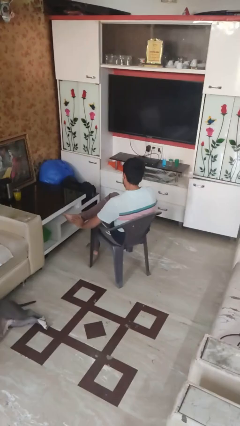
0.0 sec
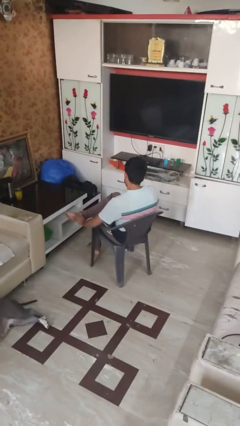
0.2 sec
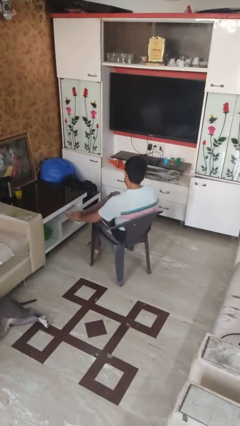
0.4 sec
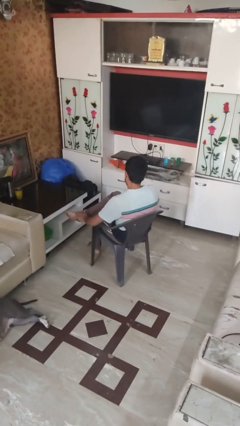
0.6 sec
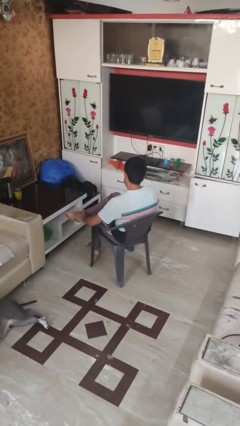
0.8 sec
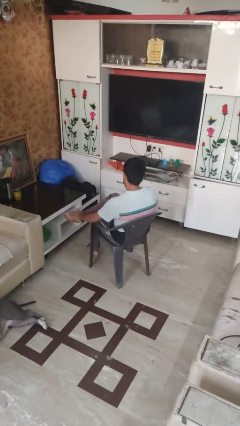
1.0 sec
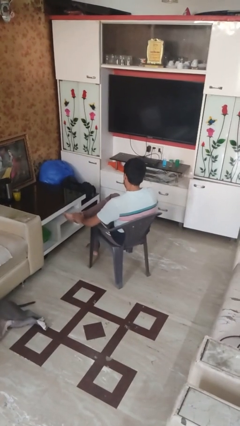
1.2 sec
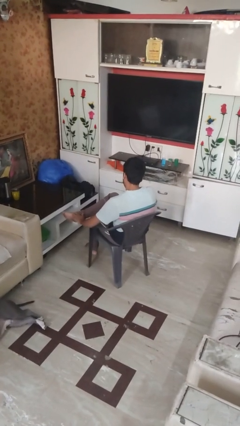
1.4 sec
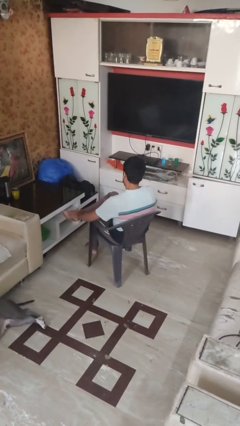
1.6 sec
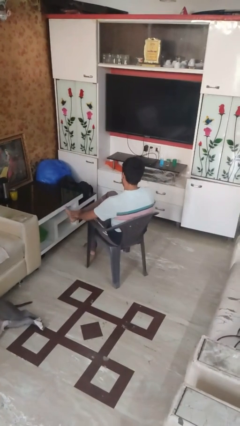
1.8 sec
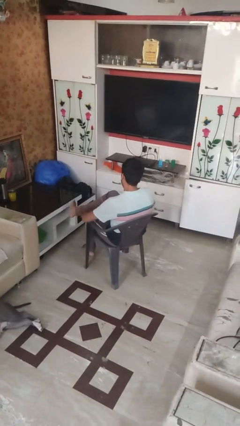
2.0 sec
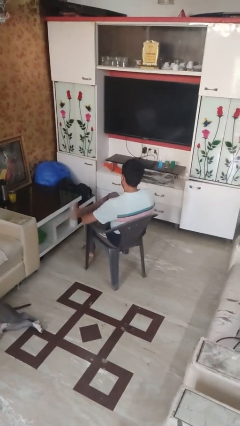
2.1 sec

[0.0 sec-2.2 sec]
person rubs foot

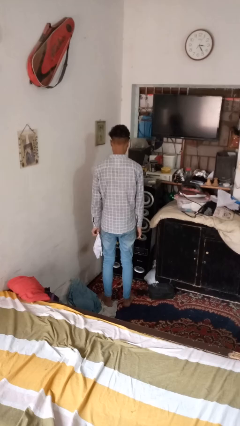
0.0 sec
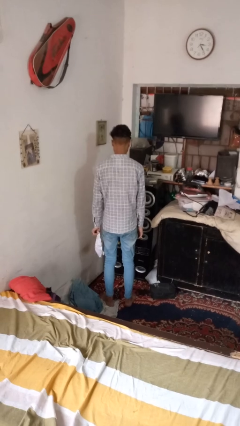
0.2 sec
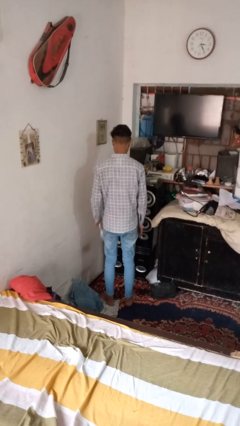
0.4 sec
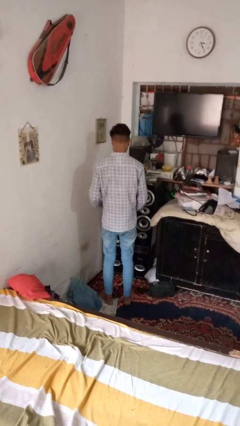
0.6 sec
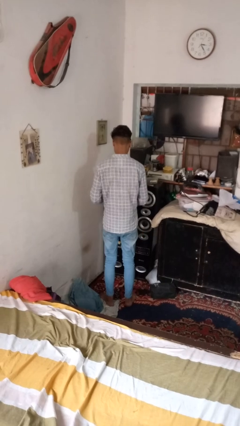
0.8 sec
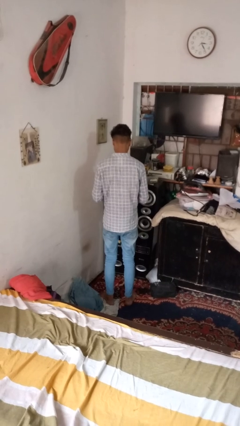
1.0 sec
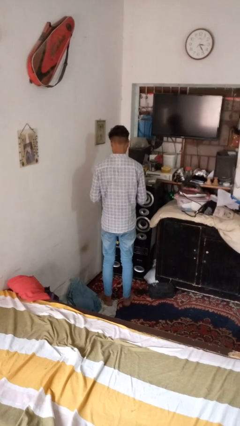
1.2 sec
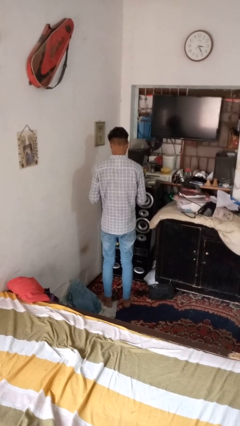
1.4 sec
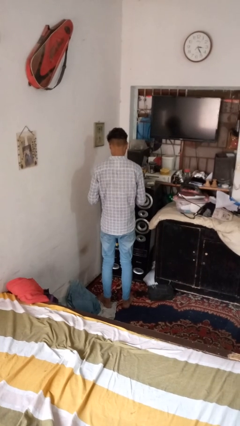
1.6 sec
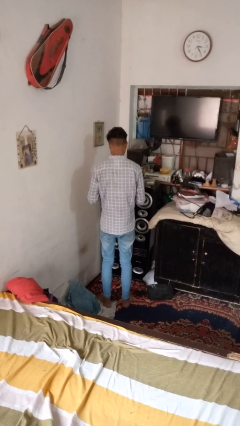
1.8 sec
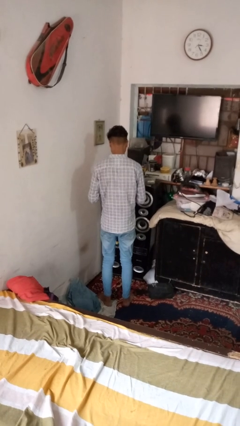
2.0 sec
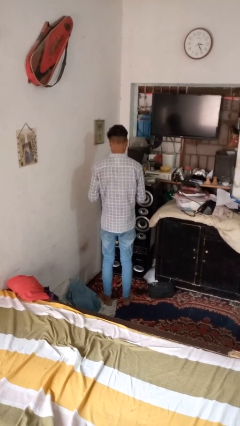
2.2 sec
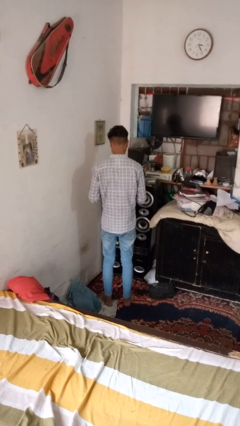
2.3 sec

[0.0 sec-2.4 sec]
person crumples paper

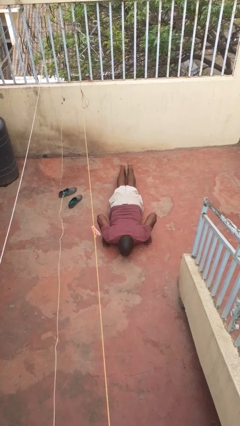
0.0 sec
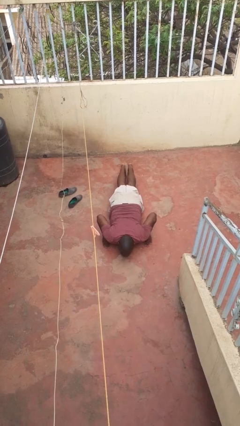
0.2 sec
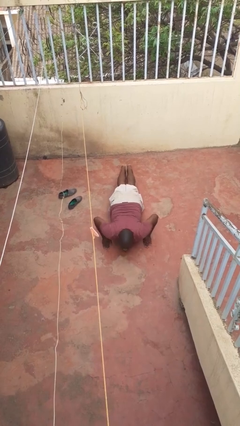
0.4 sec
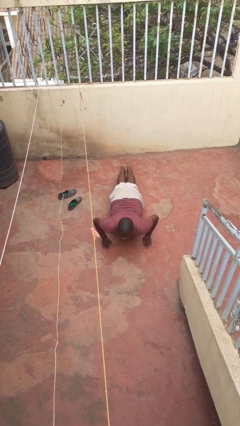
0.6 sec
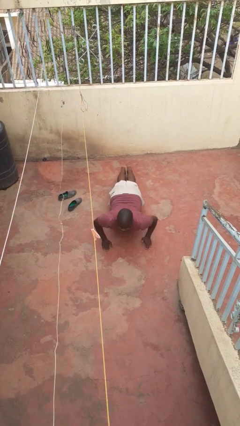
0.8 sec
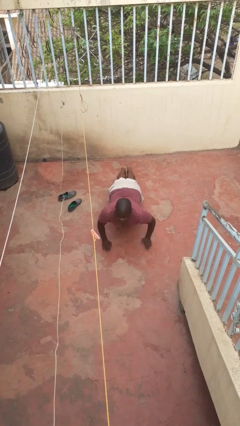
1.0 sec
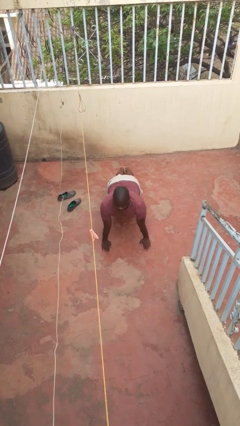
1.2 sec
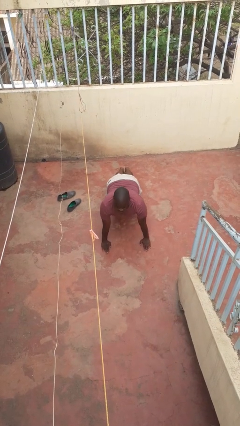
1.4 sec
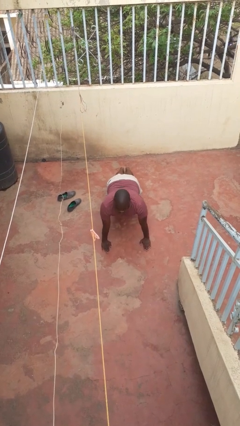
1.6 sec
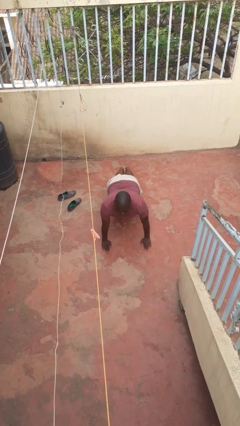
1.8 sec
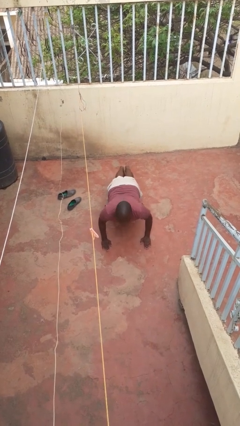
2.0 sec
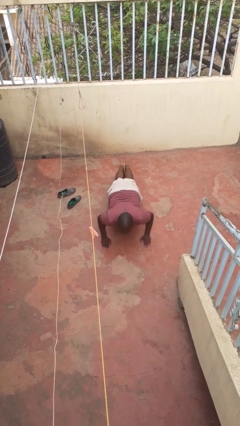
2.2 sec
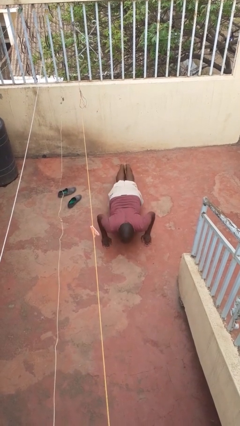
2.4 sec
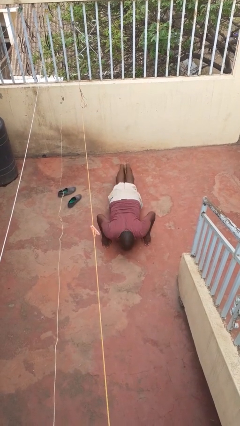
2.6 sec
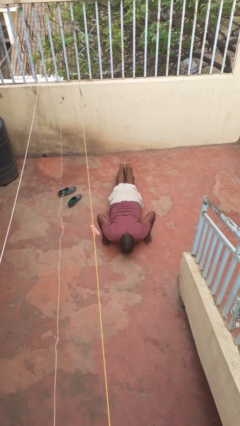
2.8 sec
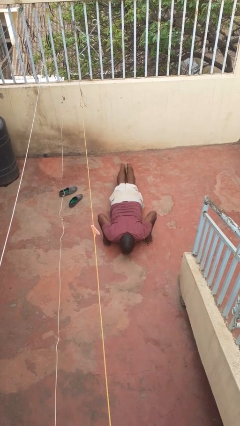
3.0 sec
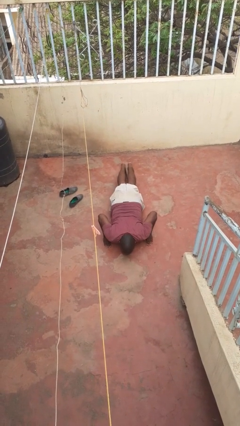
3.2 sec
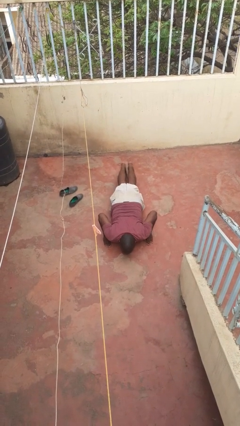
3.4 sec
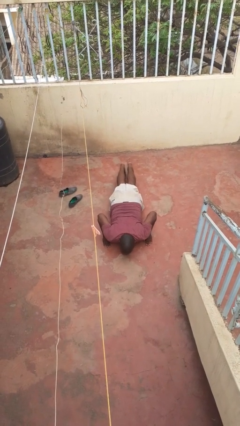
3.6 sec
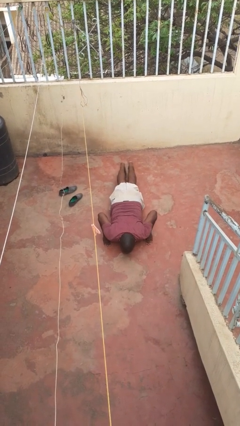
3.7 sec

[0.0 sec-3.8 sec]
person exercises with pushup

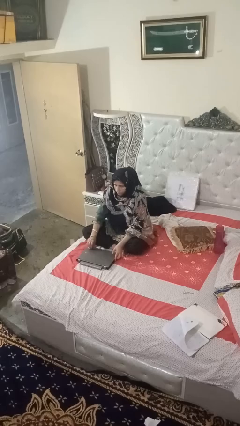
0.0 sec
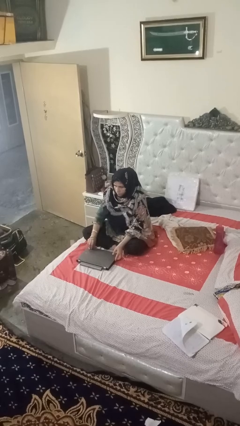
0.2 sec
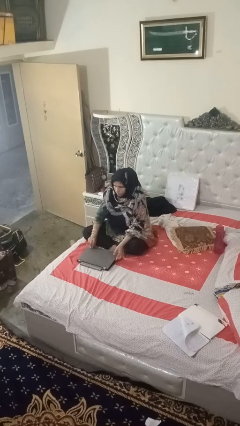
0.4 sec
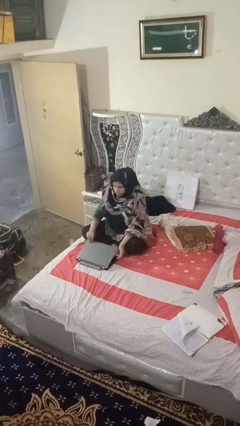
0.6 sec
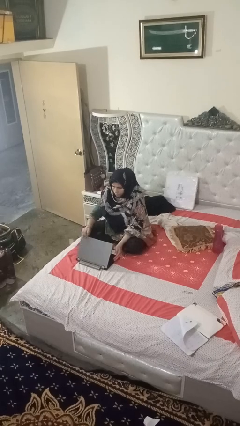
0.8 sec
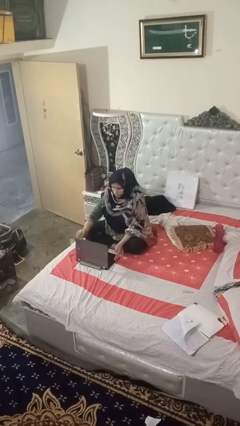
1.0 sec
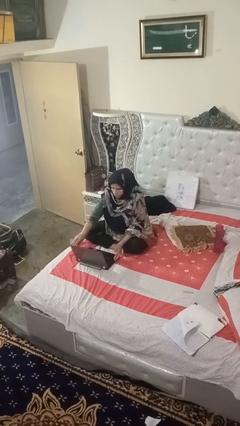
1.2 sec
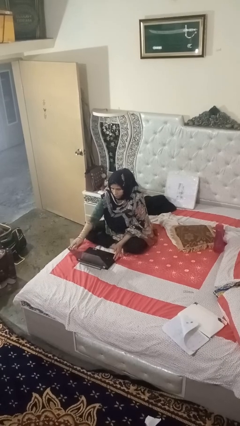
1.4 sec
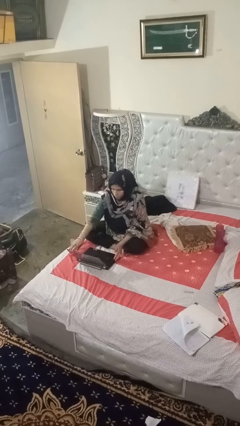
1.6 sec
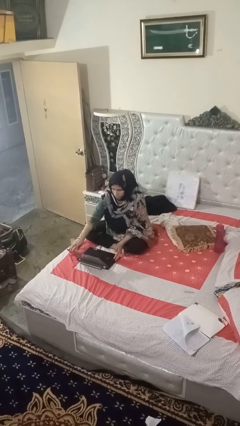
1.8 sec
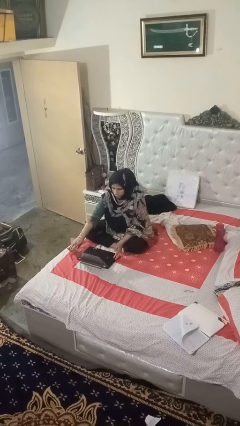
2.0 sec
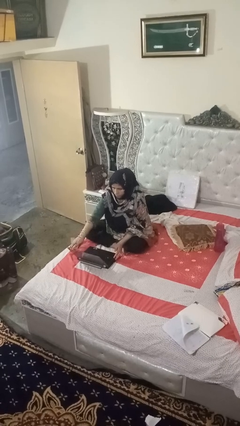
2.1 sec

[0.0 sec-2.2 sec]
person opens laptop

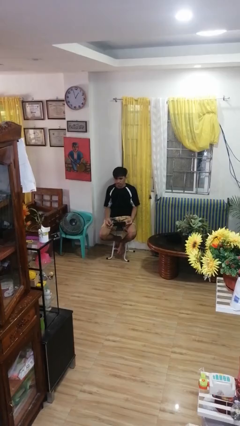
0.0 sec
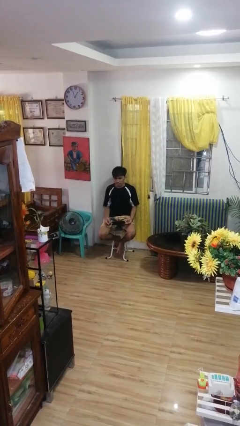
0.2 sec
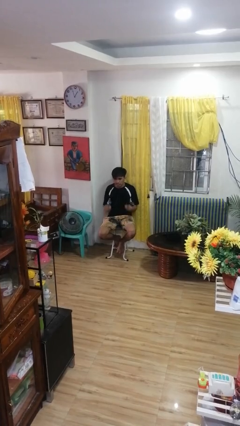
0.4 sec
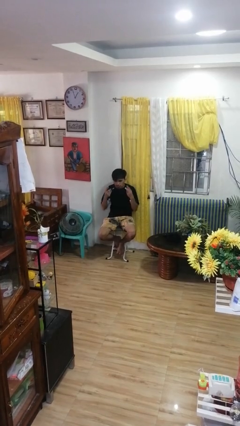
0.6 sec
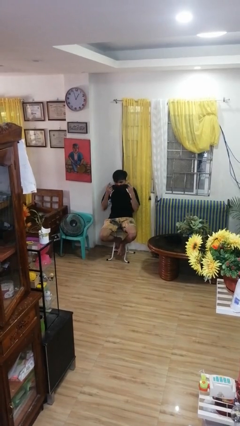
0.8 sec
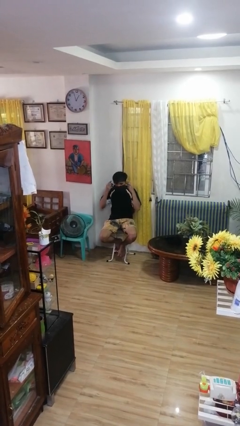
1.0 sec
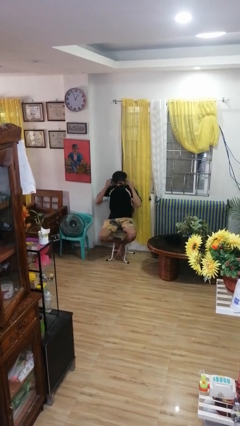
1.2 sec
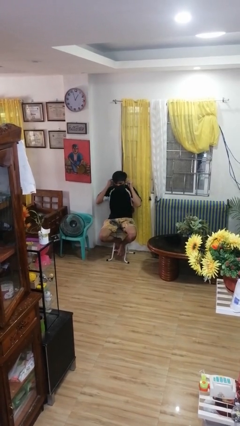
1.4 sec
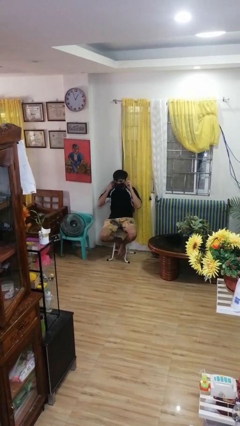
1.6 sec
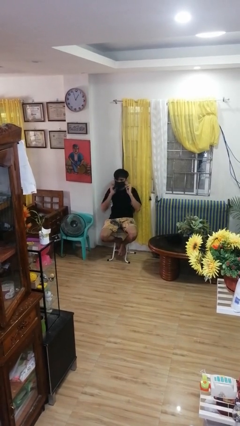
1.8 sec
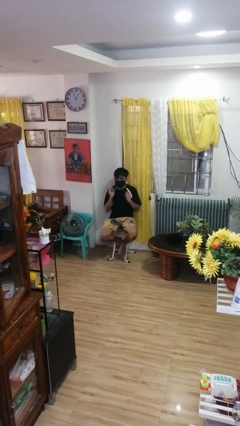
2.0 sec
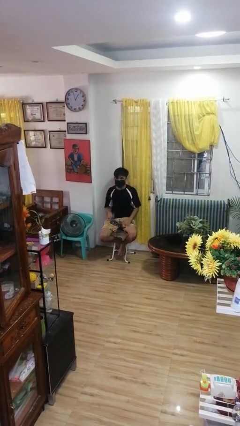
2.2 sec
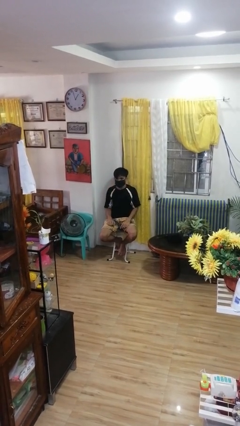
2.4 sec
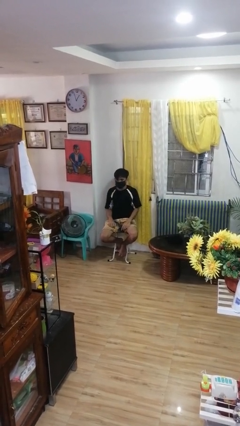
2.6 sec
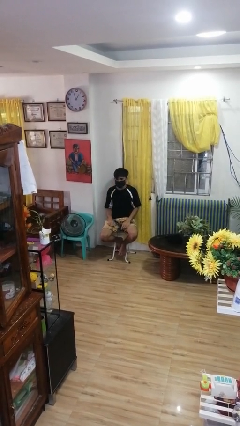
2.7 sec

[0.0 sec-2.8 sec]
person puts on facemask

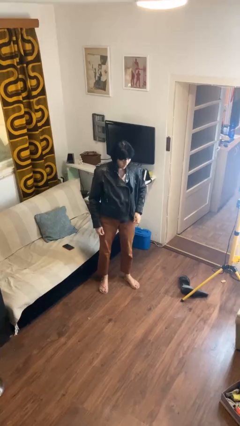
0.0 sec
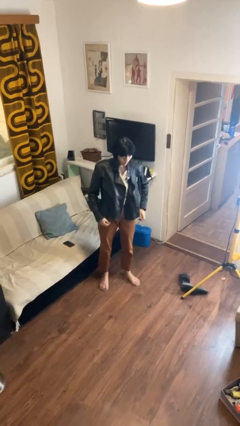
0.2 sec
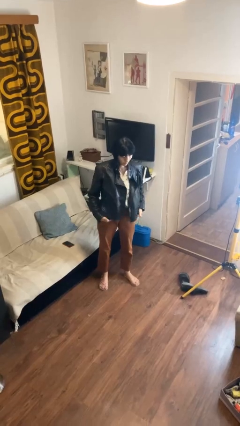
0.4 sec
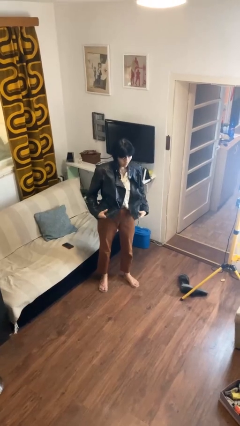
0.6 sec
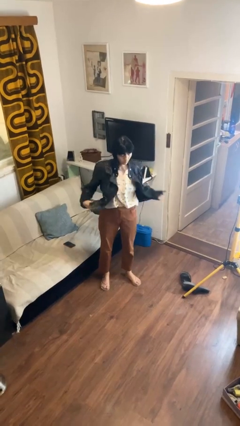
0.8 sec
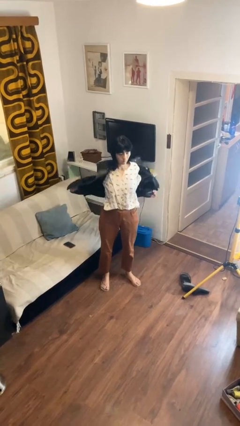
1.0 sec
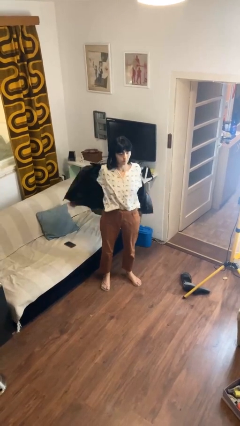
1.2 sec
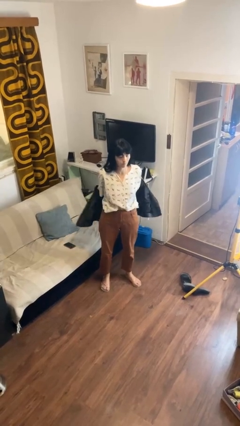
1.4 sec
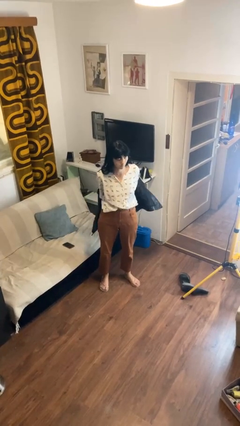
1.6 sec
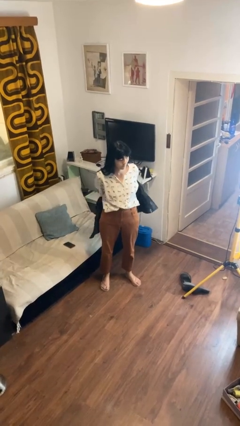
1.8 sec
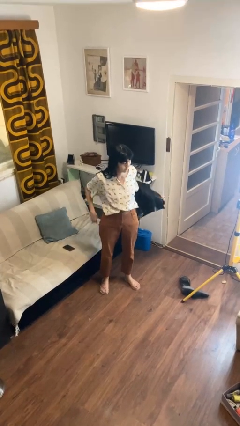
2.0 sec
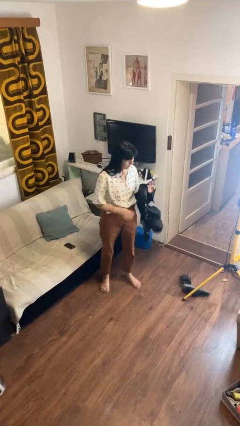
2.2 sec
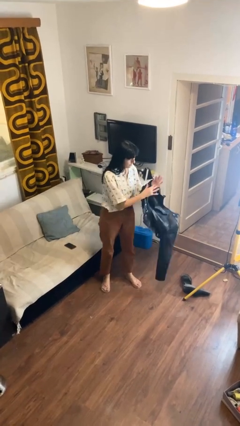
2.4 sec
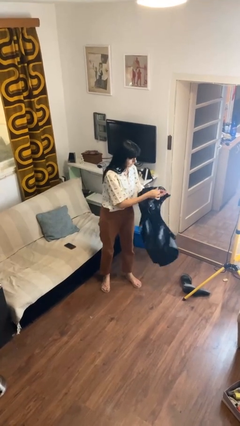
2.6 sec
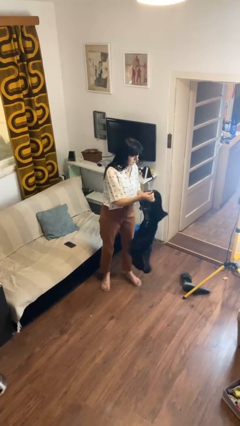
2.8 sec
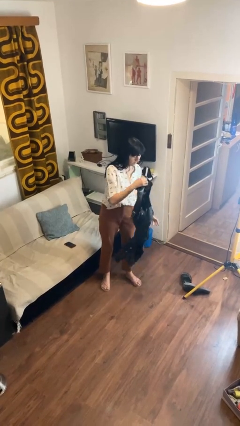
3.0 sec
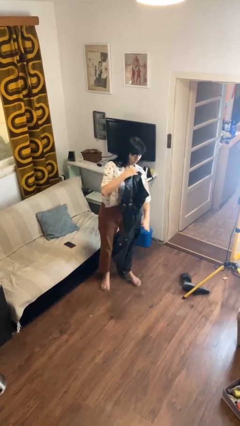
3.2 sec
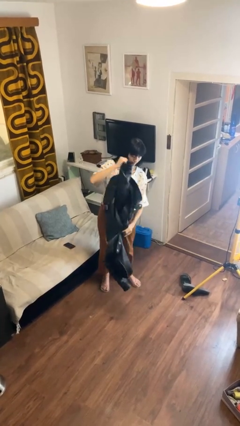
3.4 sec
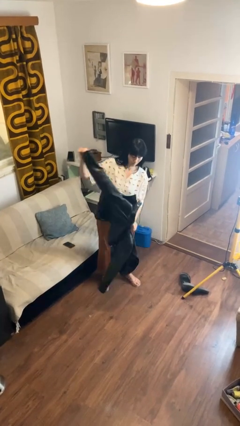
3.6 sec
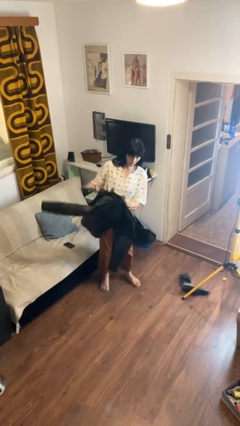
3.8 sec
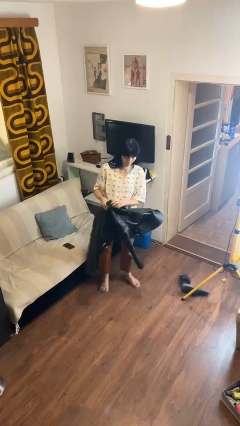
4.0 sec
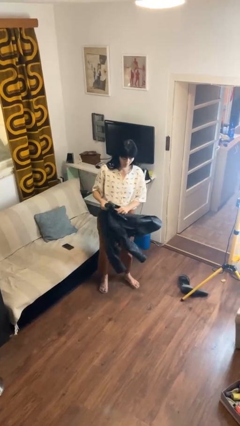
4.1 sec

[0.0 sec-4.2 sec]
person takes off jacket
